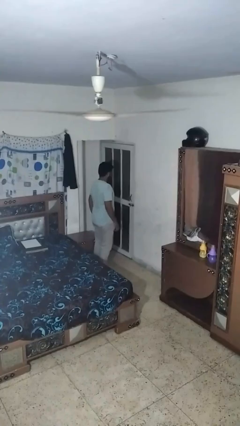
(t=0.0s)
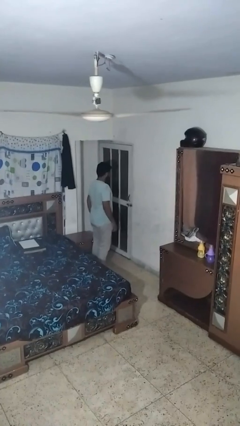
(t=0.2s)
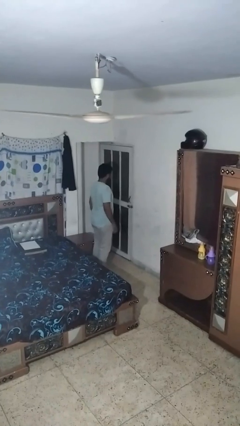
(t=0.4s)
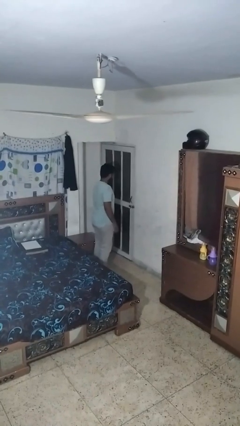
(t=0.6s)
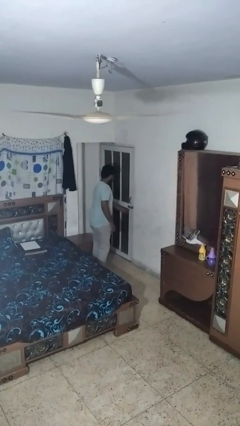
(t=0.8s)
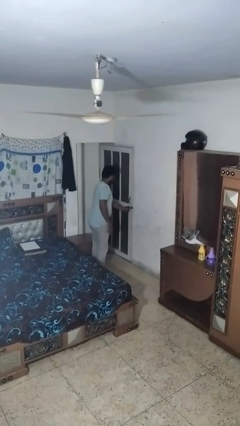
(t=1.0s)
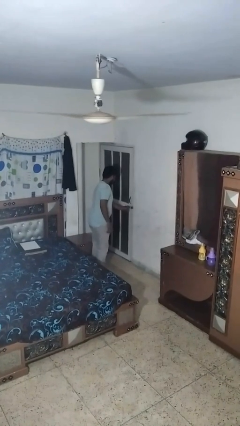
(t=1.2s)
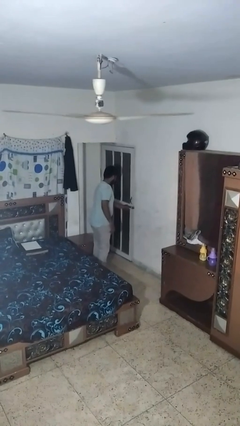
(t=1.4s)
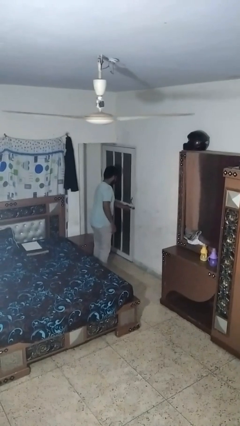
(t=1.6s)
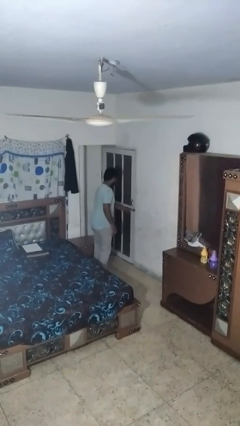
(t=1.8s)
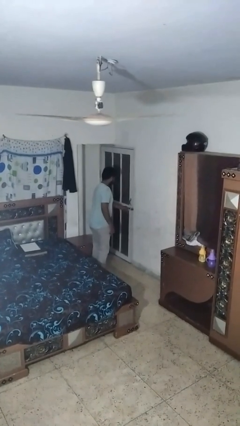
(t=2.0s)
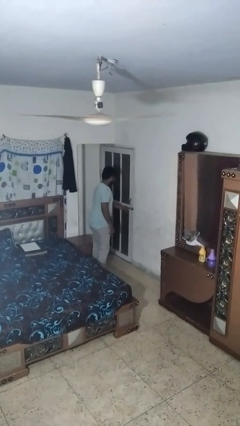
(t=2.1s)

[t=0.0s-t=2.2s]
person unlocks door with keys

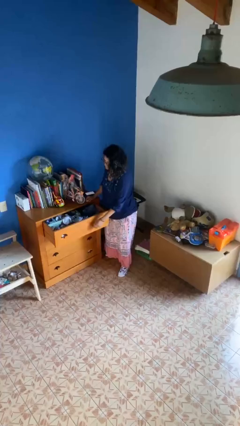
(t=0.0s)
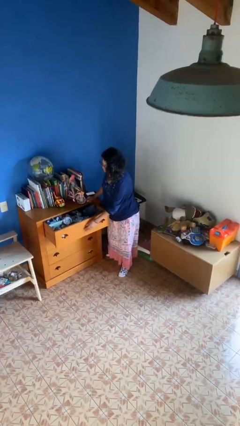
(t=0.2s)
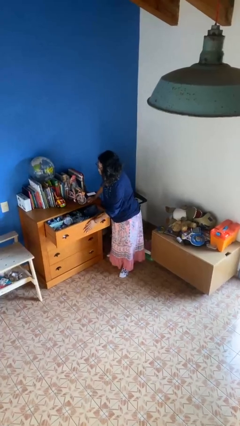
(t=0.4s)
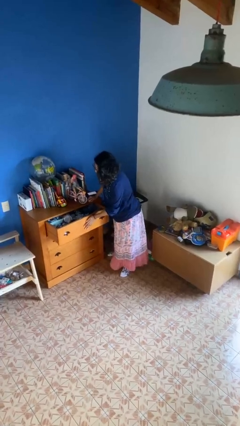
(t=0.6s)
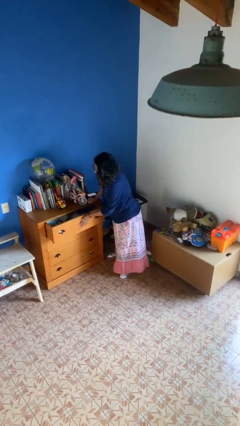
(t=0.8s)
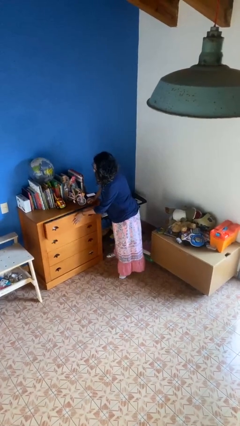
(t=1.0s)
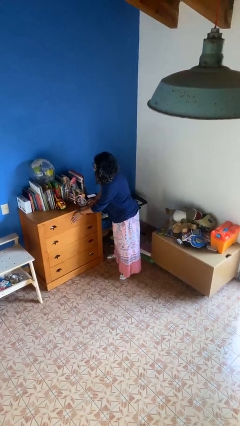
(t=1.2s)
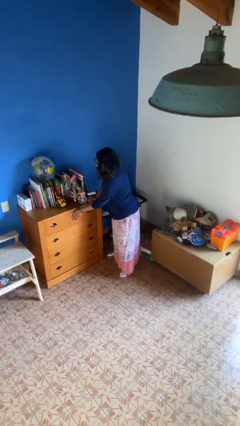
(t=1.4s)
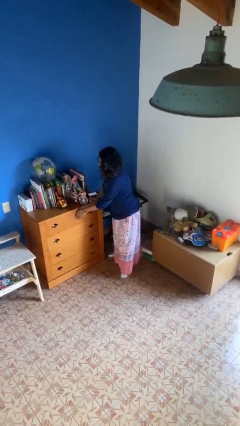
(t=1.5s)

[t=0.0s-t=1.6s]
person closes dresser drawer

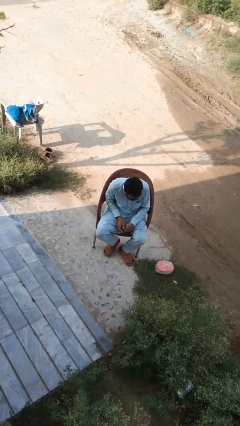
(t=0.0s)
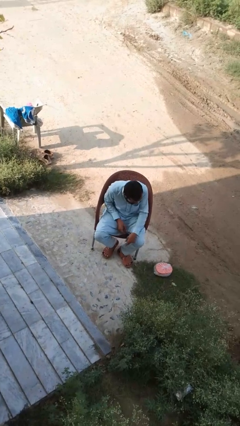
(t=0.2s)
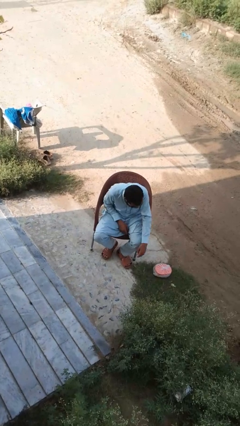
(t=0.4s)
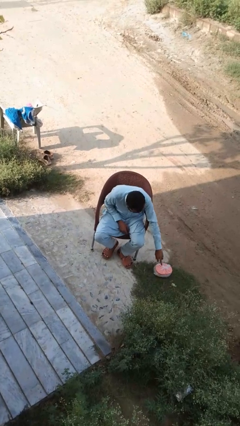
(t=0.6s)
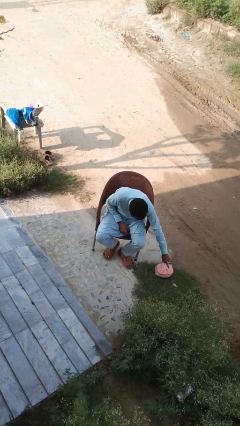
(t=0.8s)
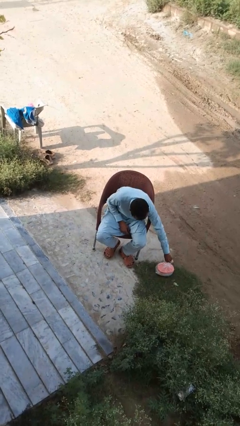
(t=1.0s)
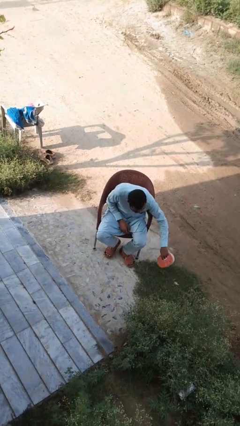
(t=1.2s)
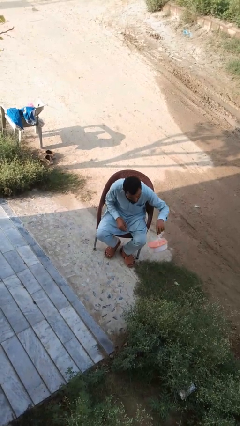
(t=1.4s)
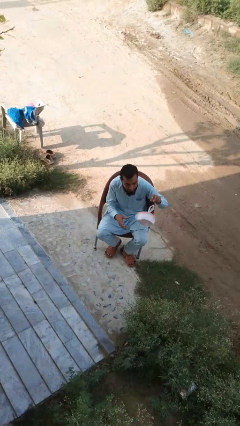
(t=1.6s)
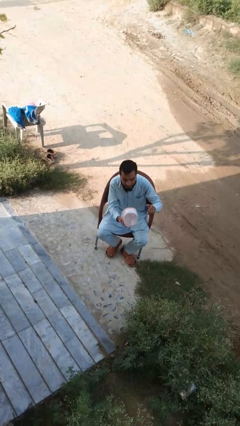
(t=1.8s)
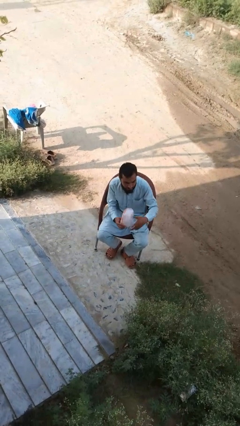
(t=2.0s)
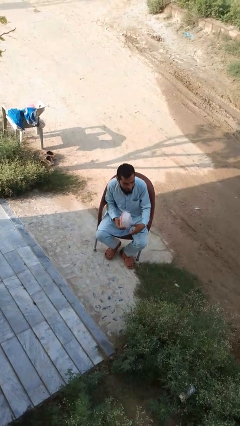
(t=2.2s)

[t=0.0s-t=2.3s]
person picks up object from floor

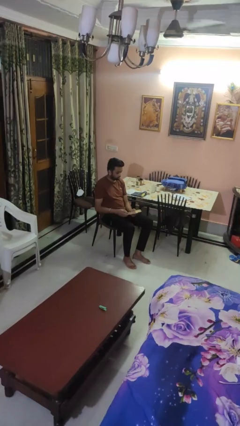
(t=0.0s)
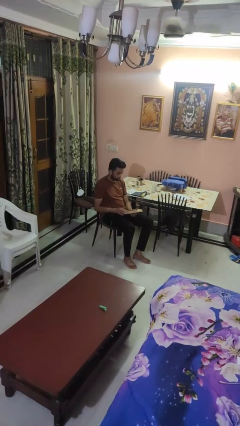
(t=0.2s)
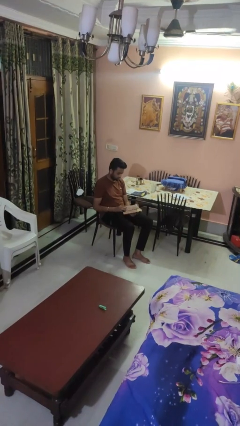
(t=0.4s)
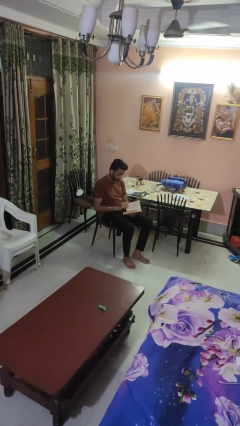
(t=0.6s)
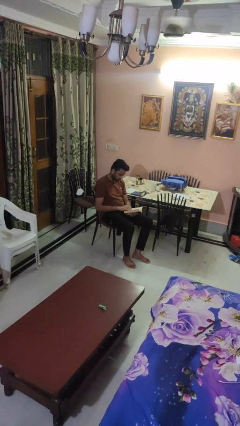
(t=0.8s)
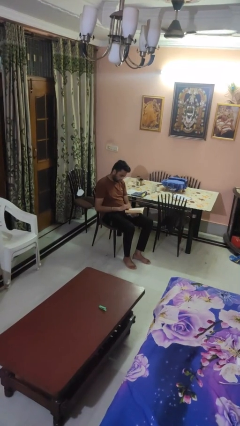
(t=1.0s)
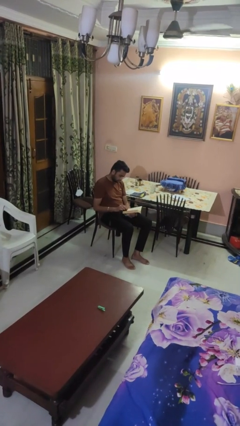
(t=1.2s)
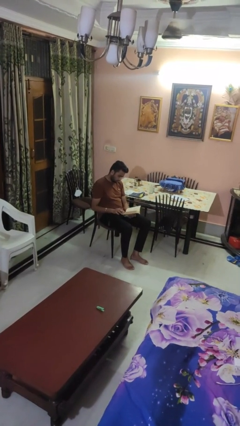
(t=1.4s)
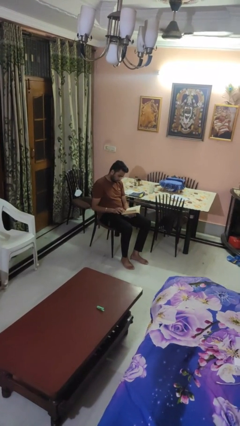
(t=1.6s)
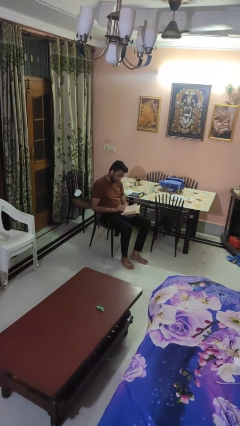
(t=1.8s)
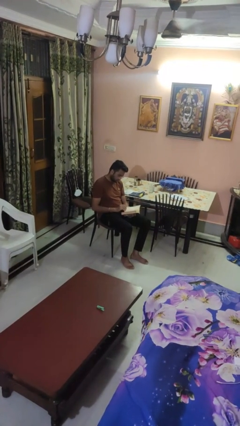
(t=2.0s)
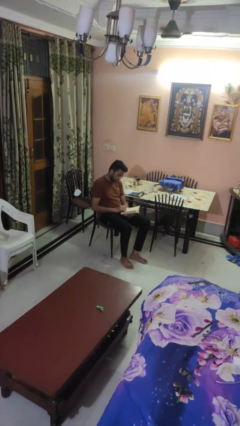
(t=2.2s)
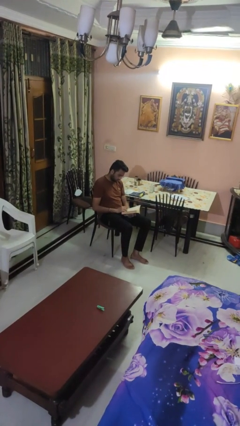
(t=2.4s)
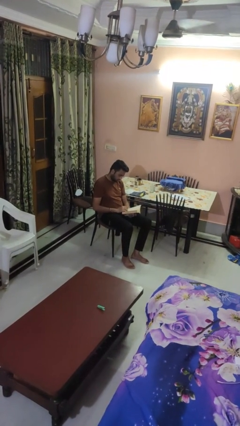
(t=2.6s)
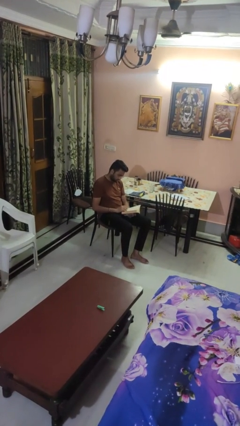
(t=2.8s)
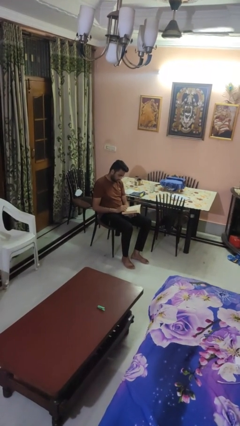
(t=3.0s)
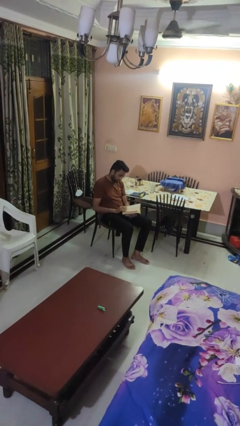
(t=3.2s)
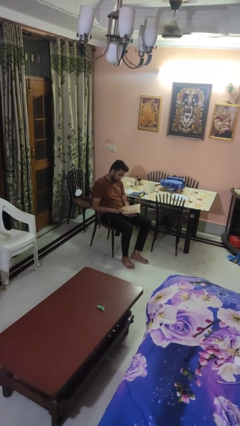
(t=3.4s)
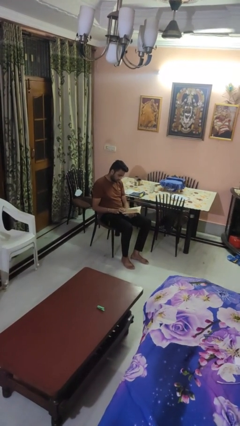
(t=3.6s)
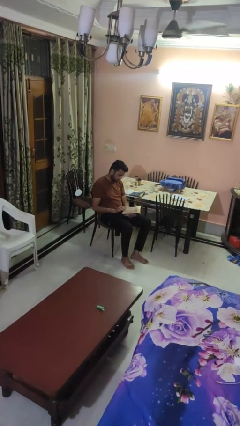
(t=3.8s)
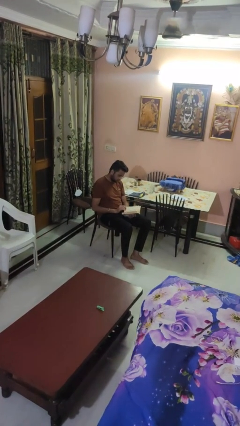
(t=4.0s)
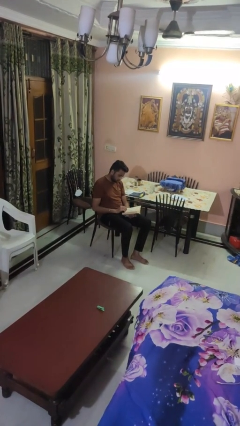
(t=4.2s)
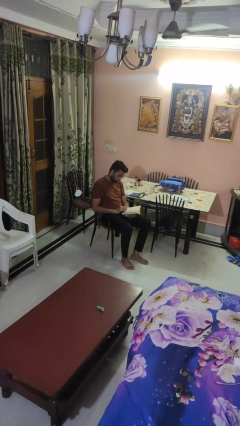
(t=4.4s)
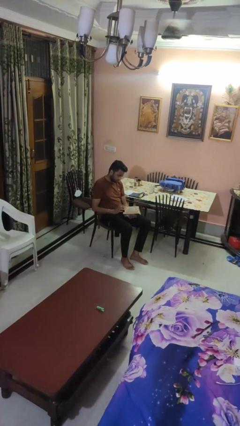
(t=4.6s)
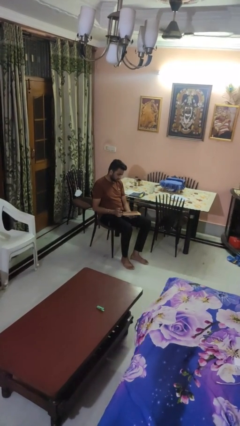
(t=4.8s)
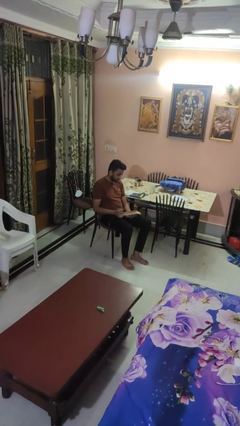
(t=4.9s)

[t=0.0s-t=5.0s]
person reads book

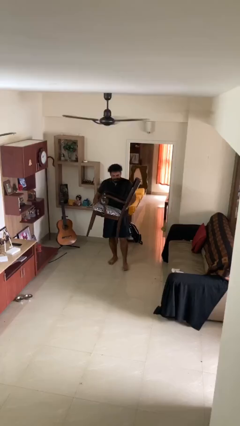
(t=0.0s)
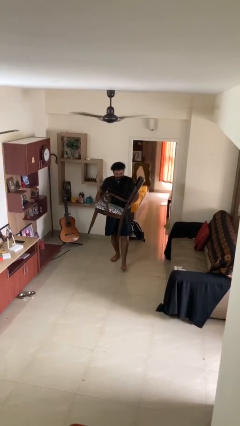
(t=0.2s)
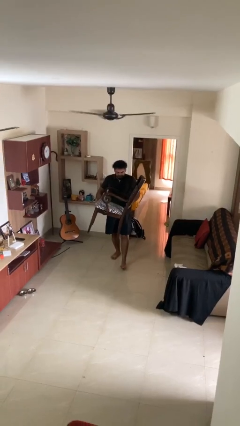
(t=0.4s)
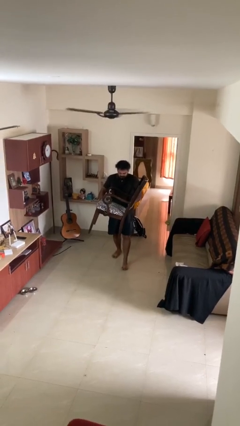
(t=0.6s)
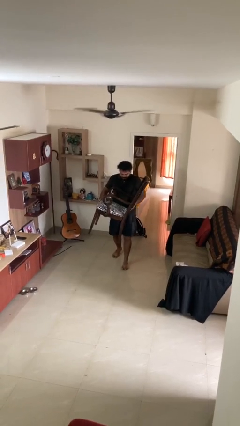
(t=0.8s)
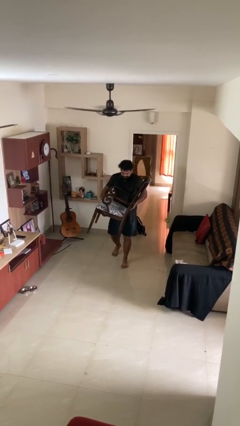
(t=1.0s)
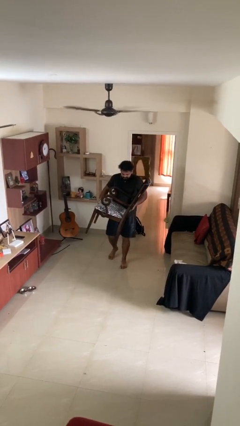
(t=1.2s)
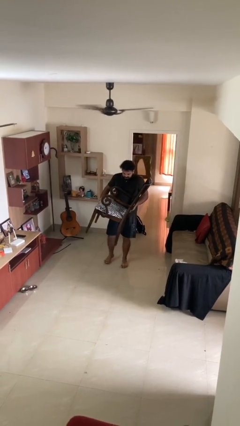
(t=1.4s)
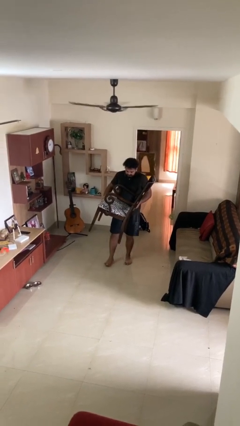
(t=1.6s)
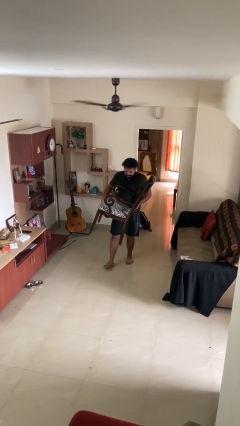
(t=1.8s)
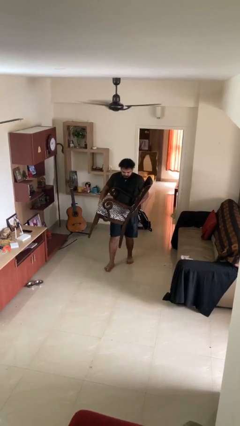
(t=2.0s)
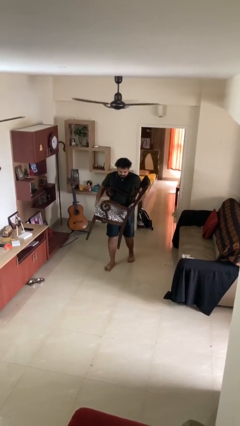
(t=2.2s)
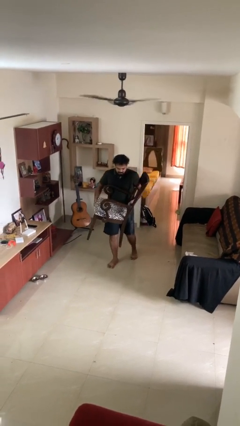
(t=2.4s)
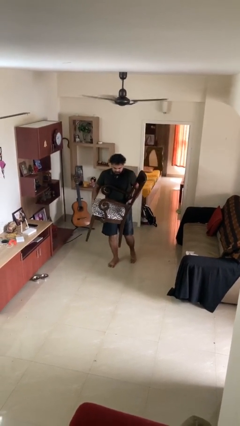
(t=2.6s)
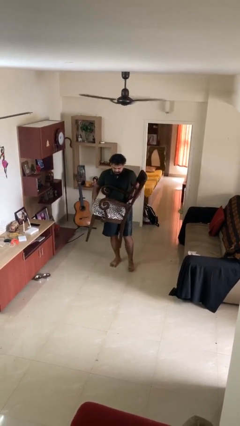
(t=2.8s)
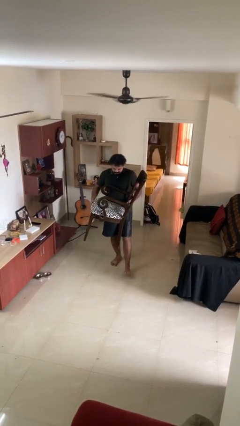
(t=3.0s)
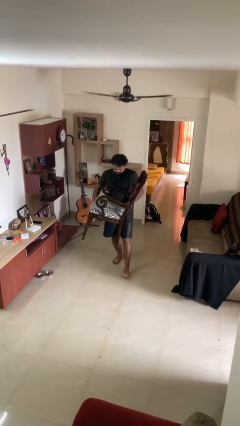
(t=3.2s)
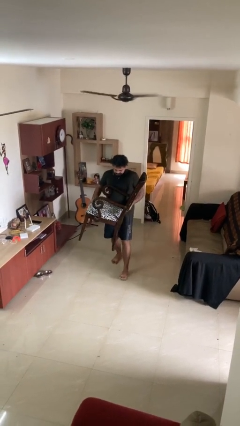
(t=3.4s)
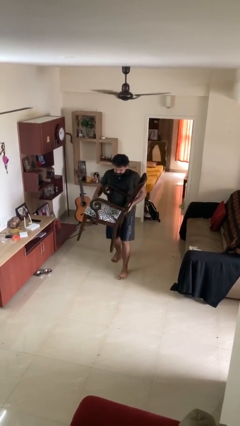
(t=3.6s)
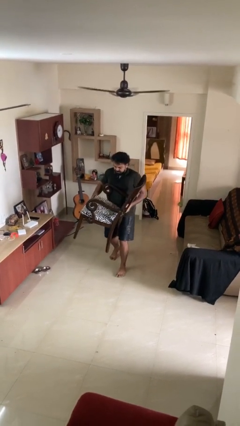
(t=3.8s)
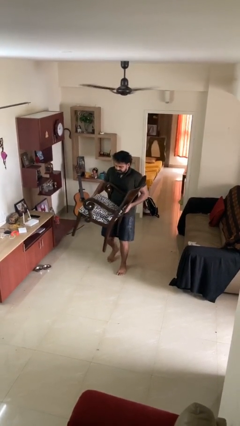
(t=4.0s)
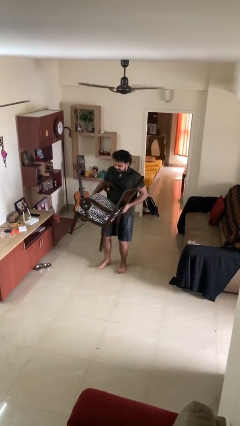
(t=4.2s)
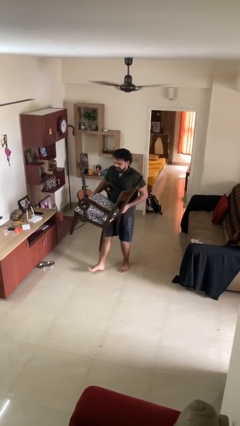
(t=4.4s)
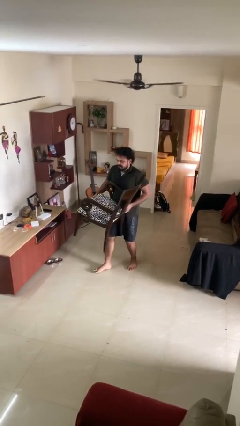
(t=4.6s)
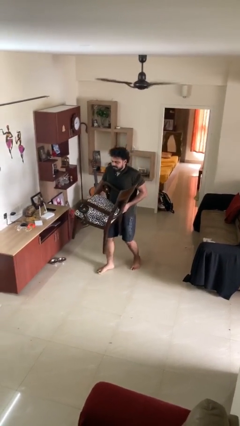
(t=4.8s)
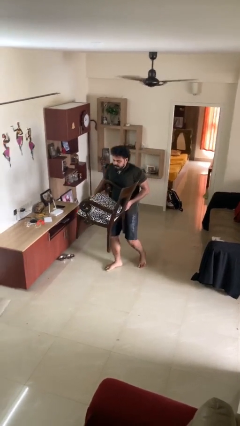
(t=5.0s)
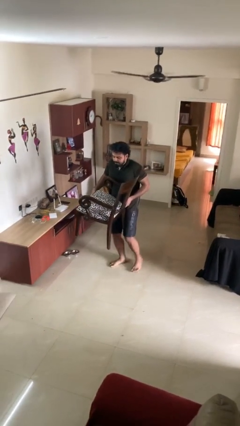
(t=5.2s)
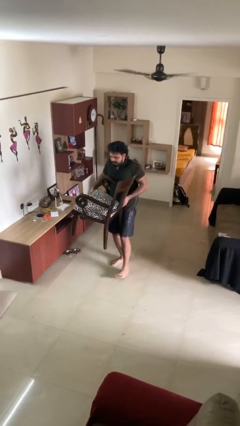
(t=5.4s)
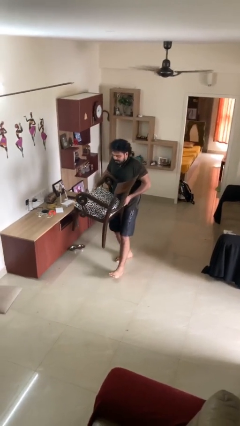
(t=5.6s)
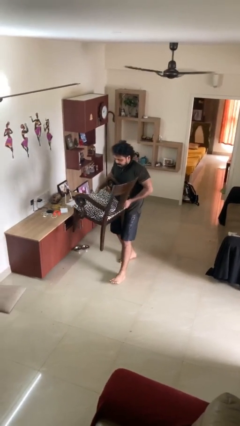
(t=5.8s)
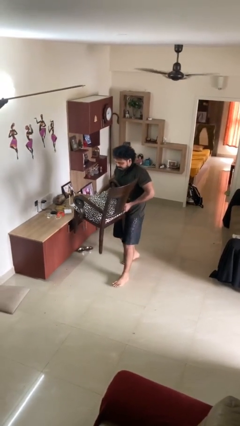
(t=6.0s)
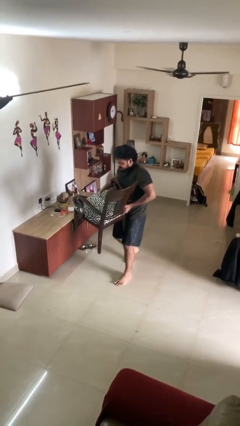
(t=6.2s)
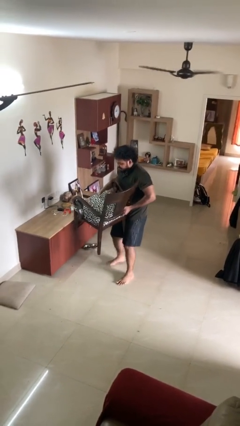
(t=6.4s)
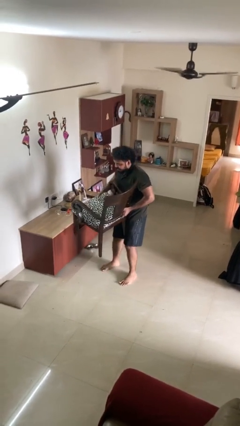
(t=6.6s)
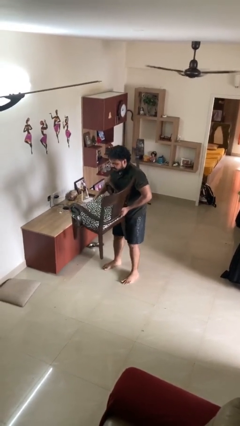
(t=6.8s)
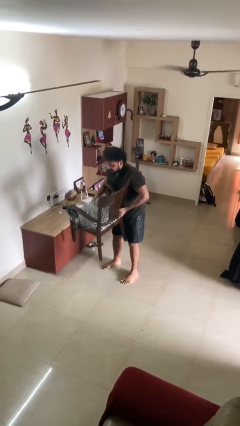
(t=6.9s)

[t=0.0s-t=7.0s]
person carries heavy object
